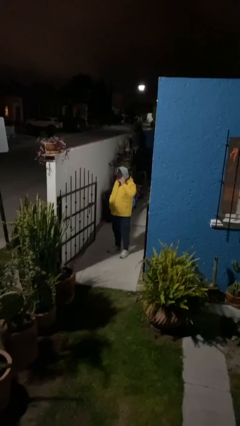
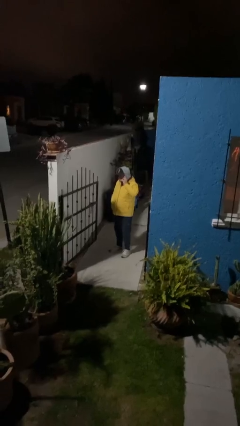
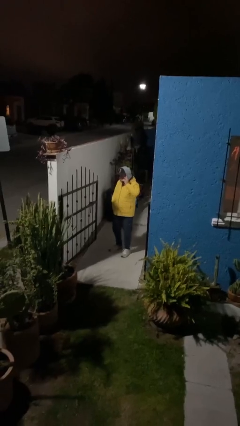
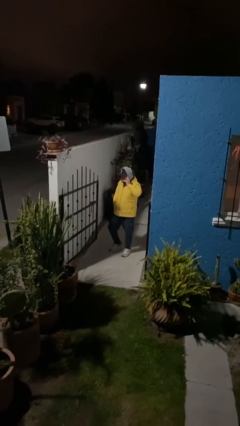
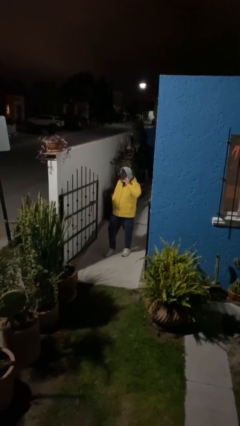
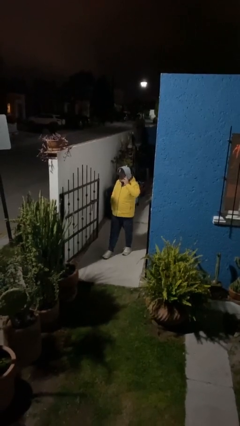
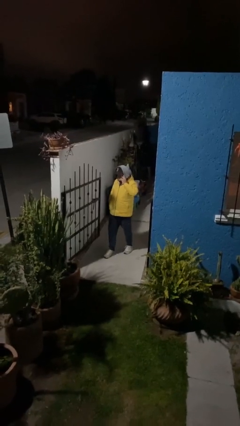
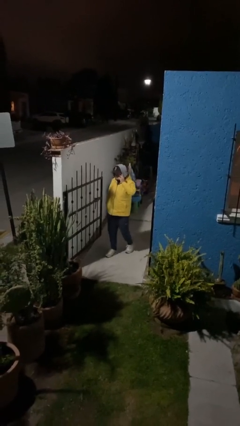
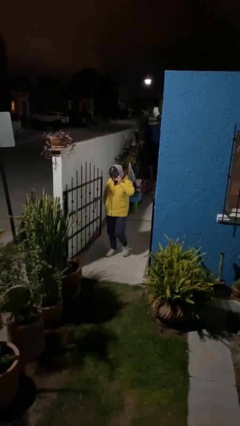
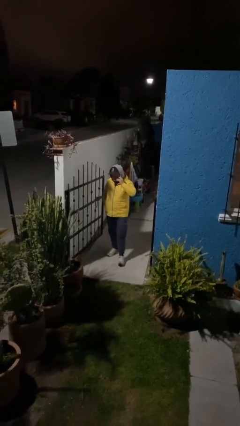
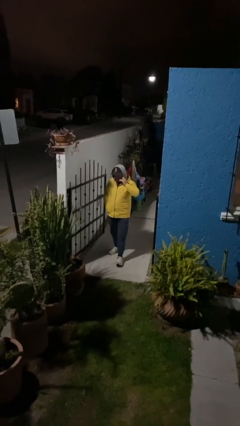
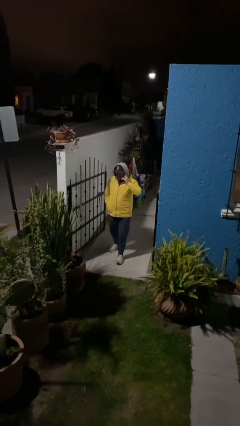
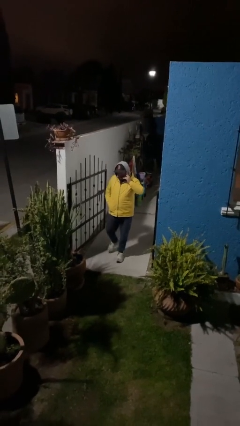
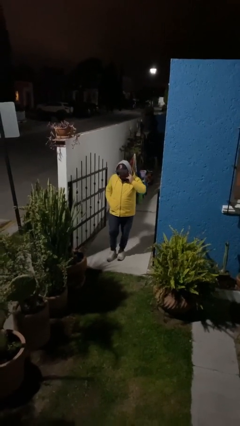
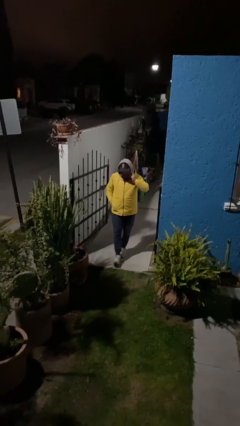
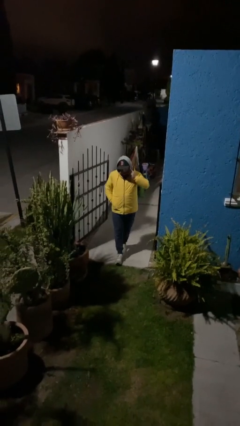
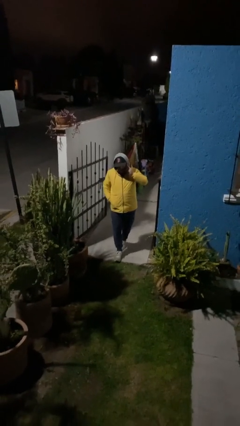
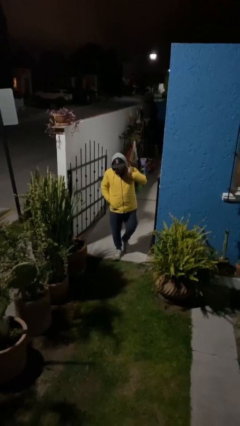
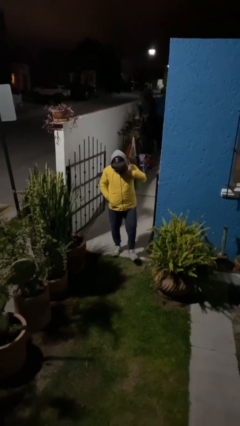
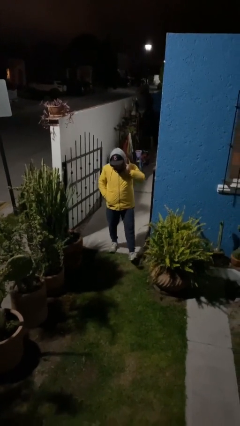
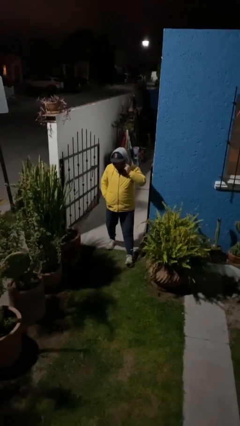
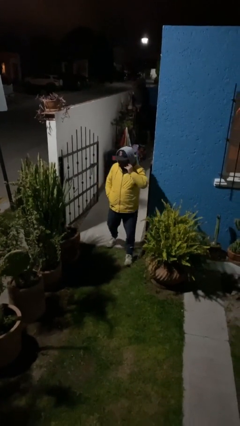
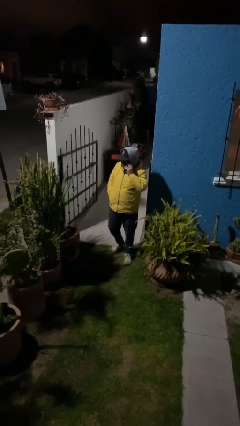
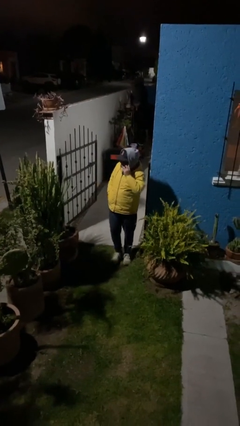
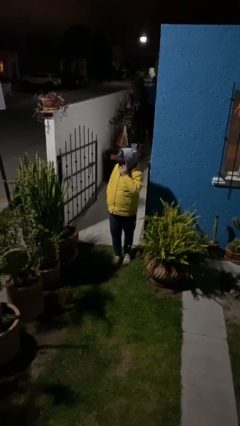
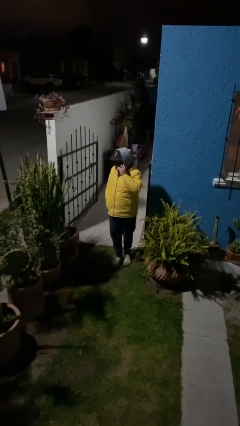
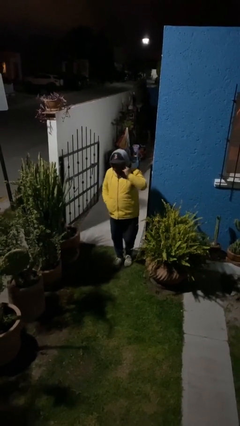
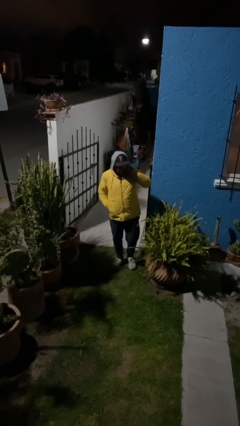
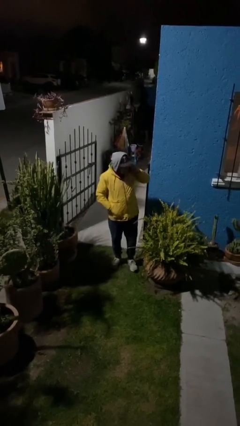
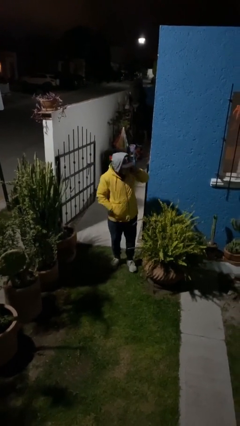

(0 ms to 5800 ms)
person enters scene through structure

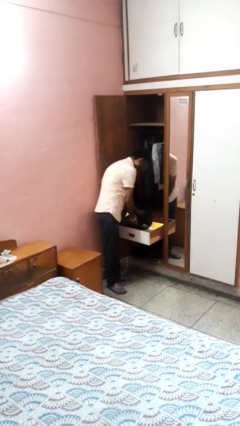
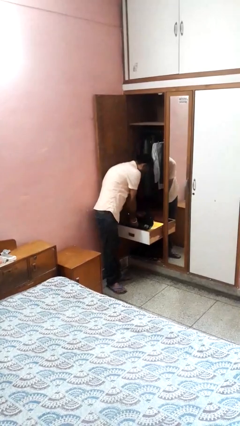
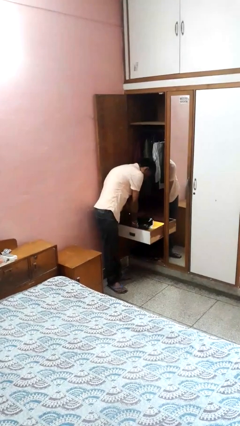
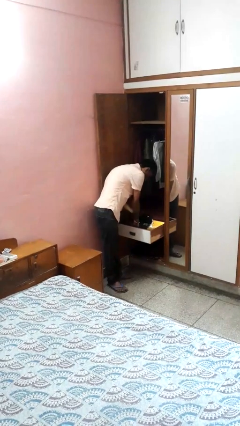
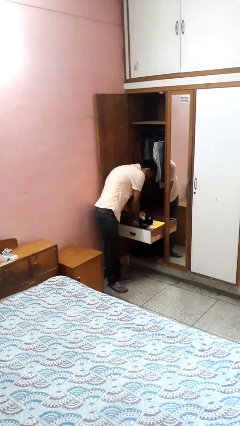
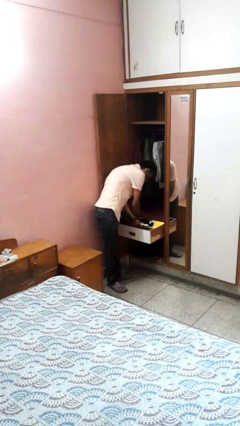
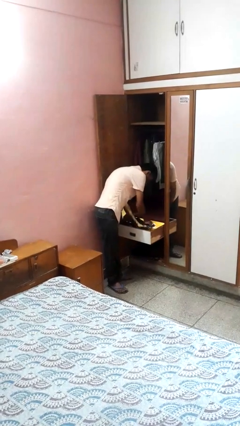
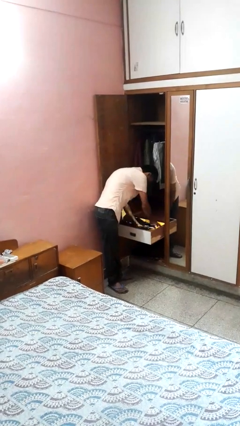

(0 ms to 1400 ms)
person puts clothes into dresser

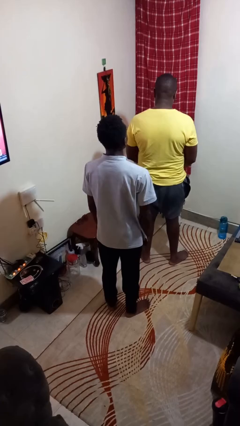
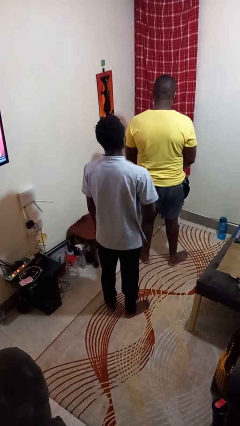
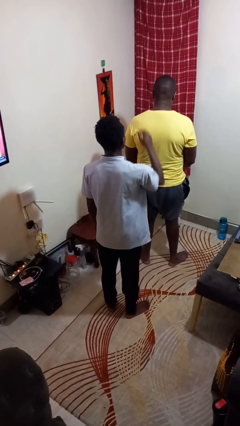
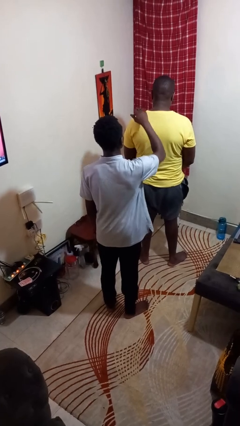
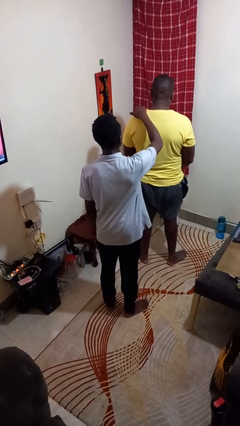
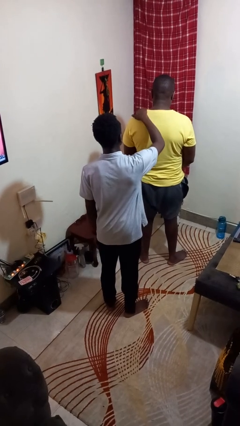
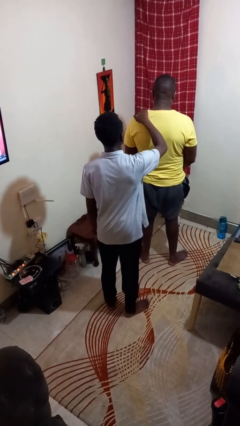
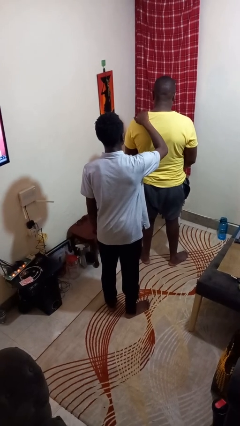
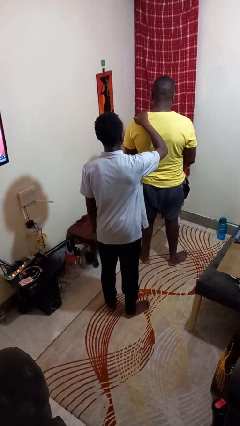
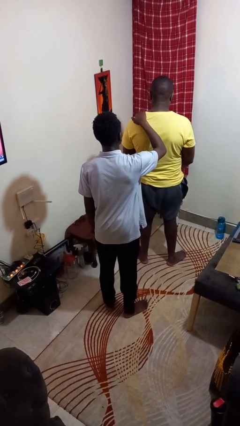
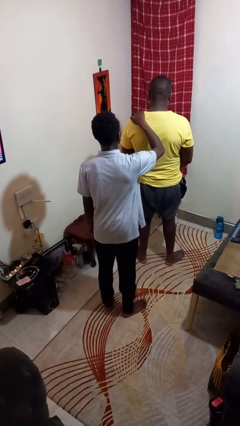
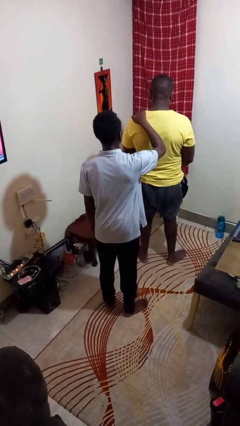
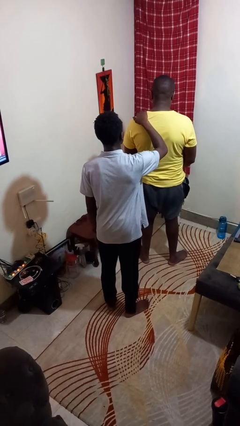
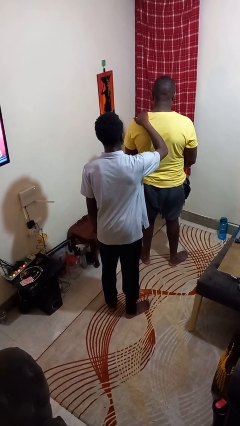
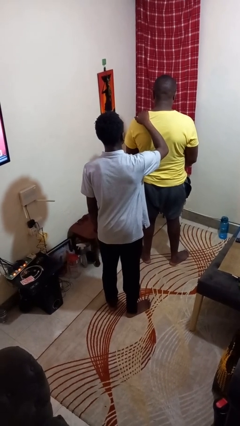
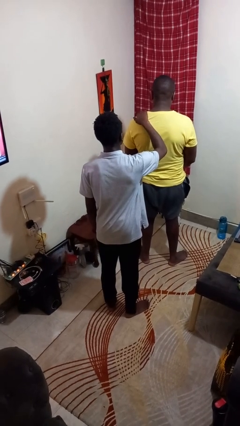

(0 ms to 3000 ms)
person touches back of person

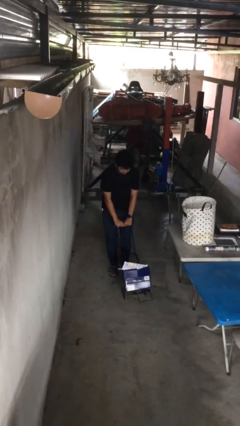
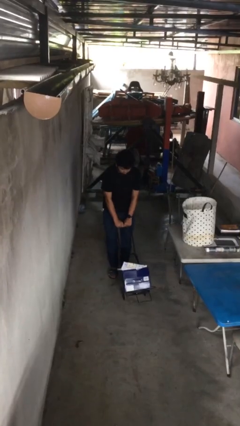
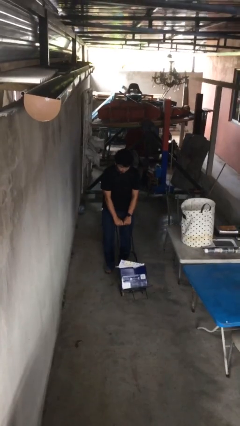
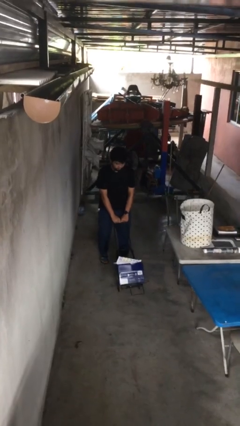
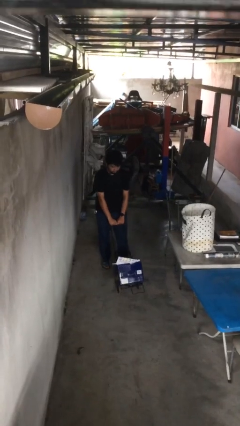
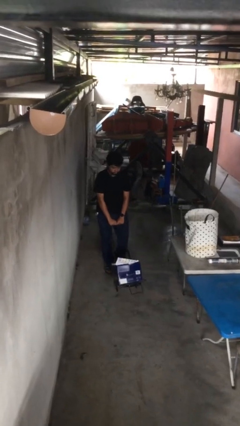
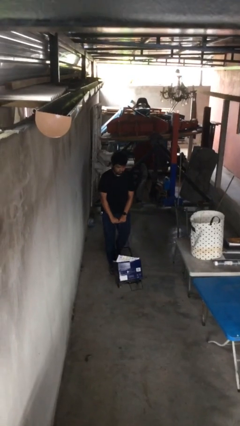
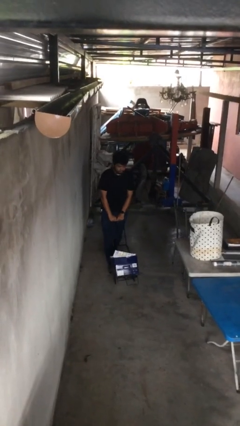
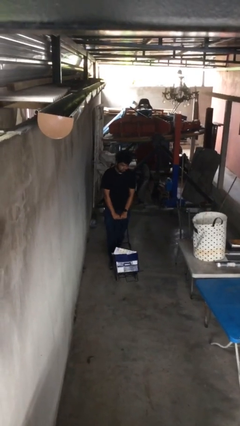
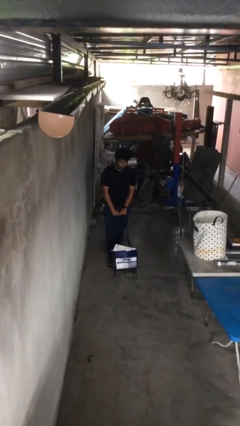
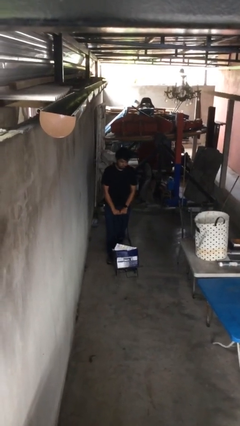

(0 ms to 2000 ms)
person pulls wheeled cart

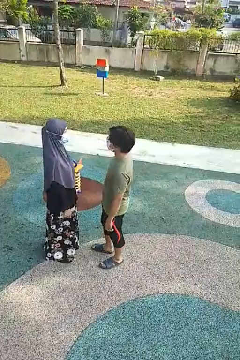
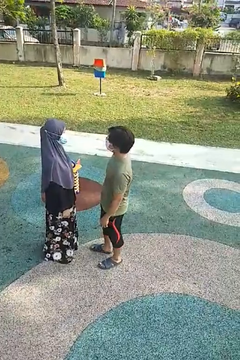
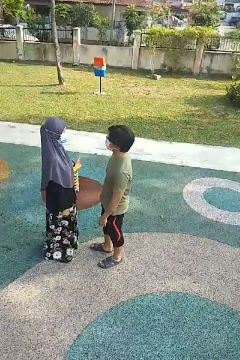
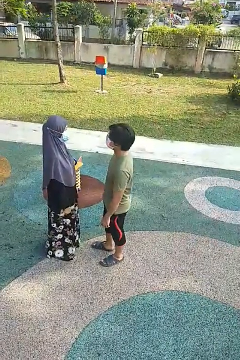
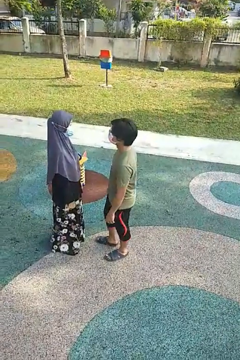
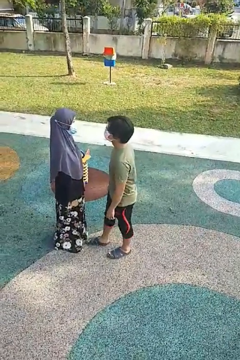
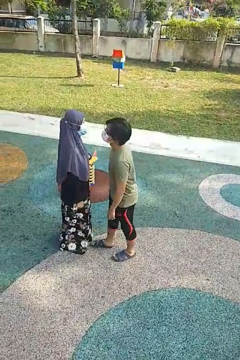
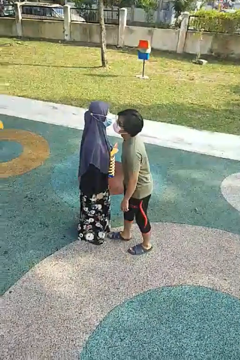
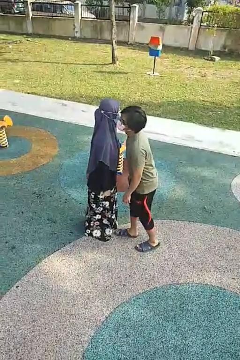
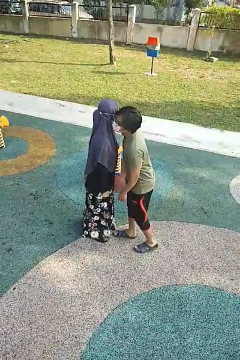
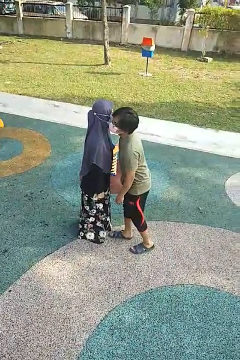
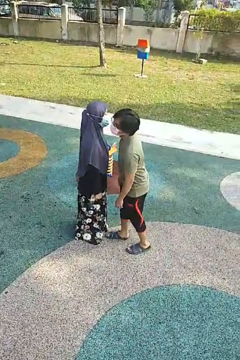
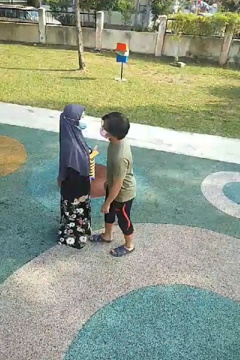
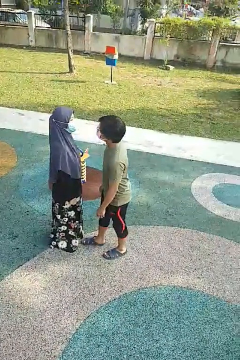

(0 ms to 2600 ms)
person kisses cheek of person

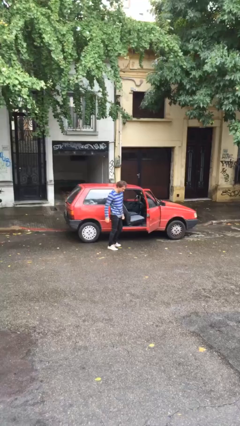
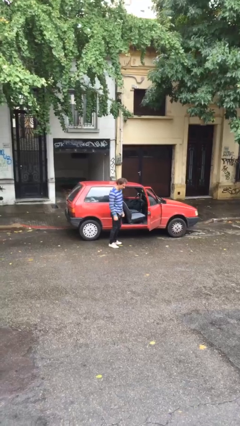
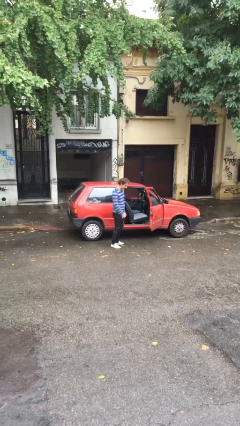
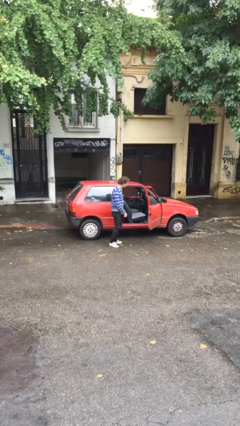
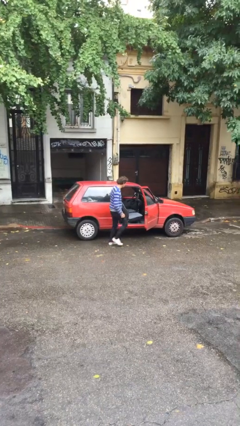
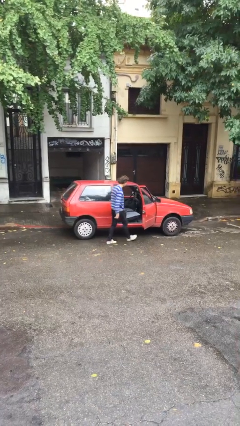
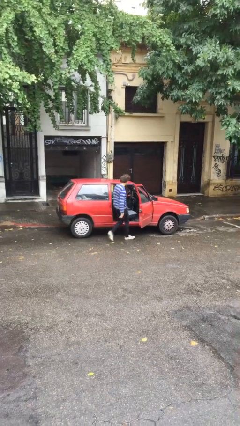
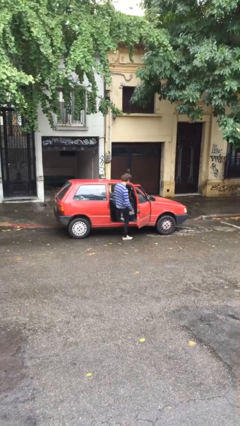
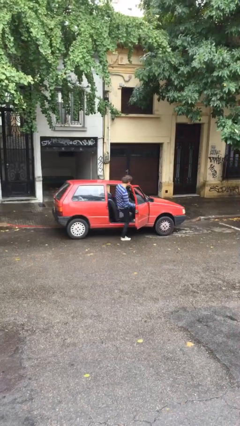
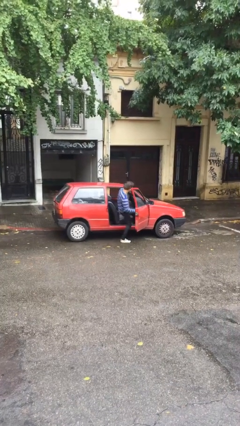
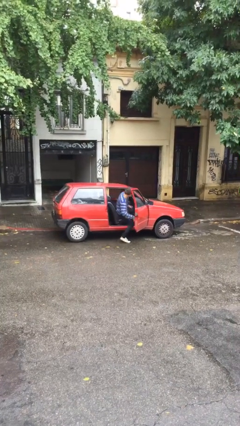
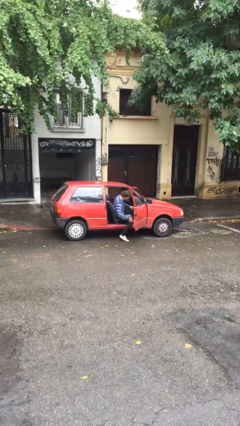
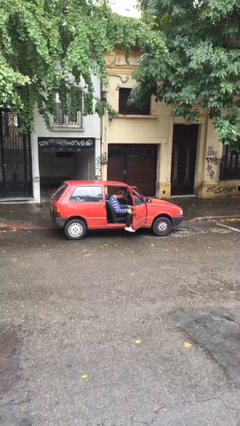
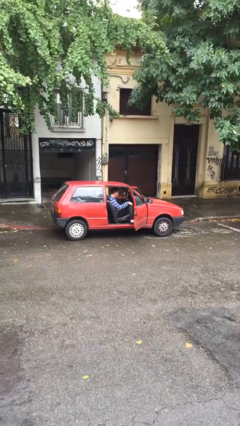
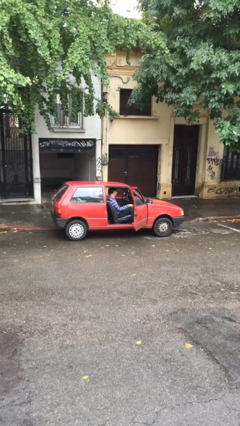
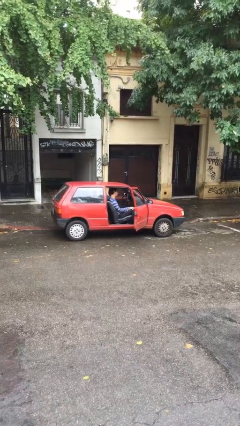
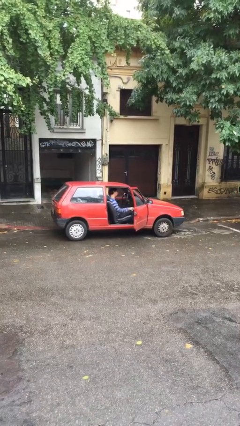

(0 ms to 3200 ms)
person enters car
